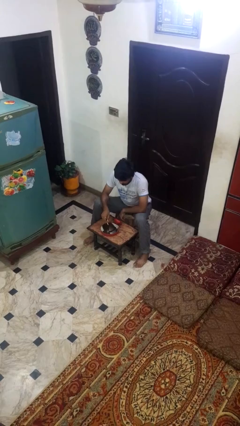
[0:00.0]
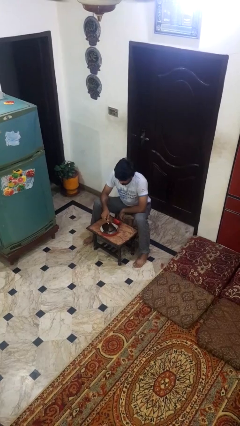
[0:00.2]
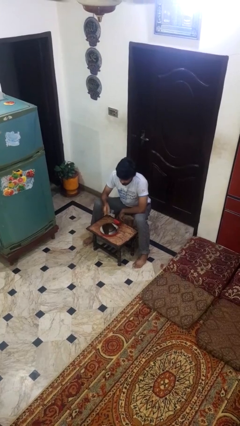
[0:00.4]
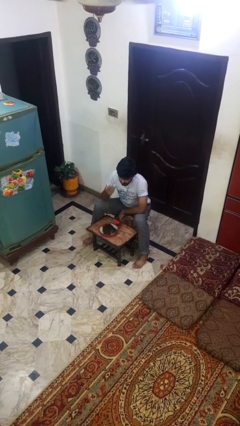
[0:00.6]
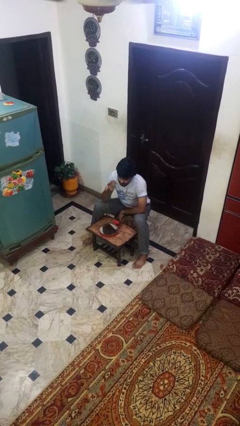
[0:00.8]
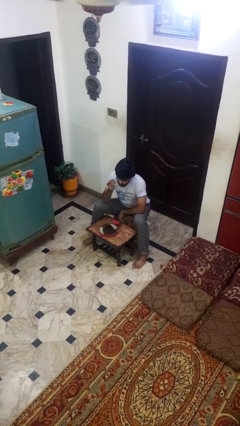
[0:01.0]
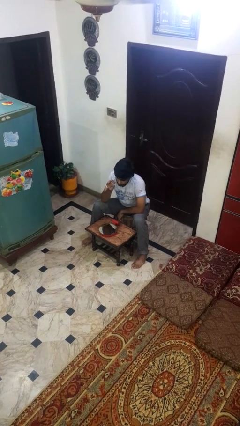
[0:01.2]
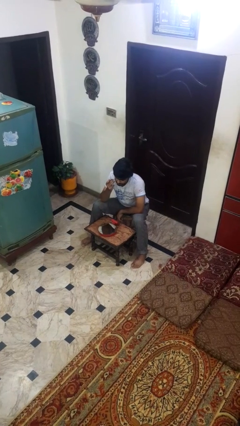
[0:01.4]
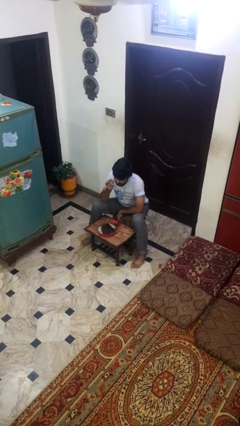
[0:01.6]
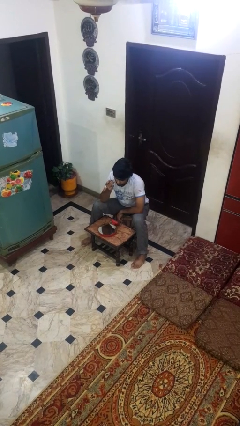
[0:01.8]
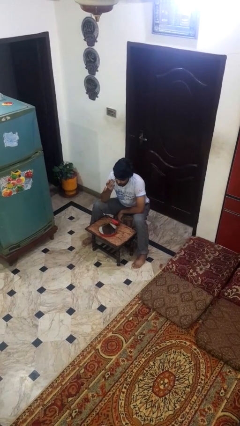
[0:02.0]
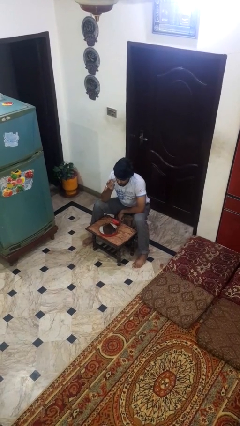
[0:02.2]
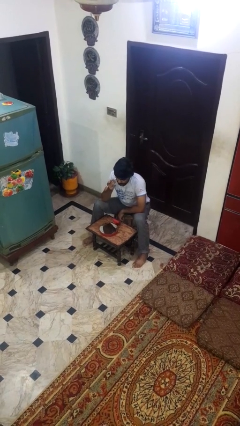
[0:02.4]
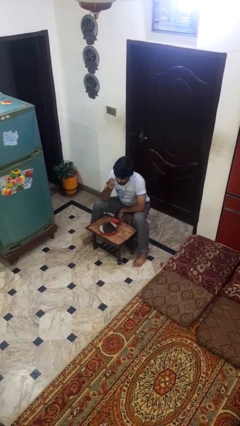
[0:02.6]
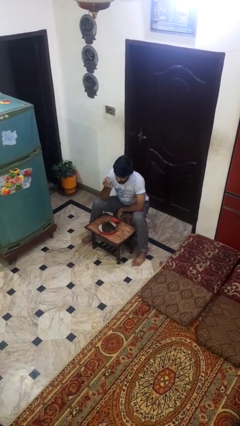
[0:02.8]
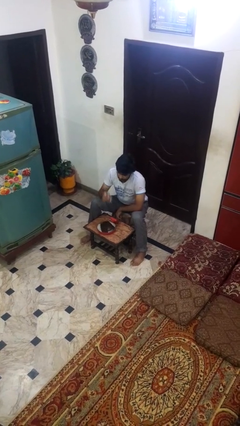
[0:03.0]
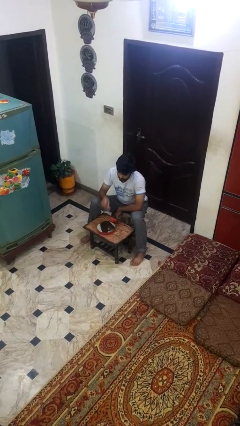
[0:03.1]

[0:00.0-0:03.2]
person applies eye makeup

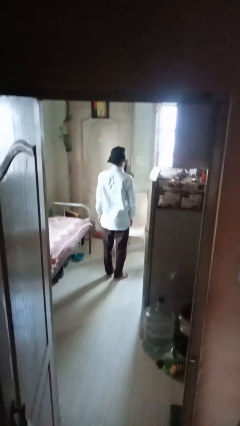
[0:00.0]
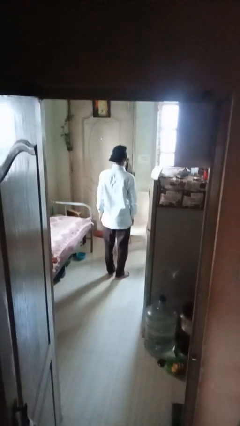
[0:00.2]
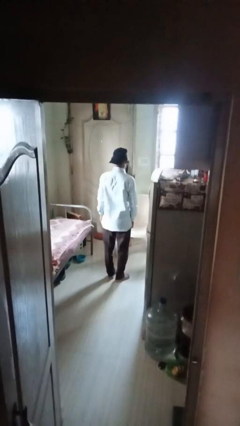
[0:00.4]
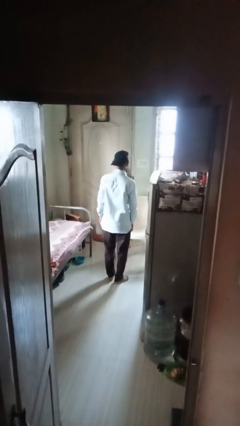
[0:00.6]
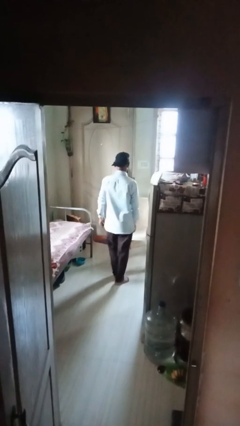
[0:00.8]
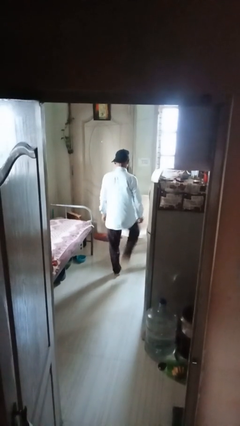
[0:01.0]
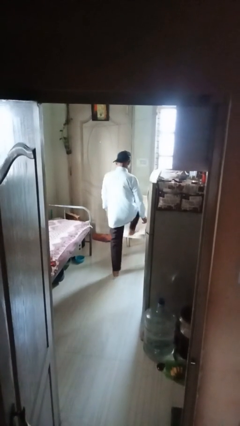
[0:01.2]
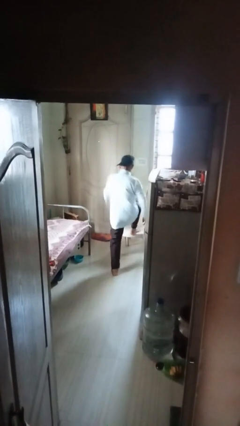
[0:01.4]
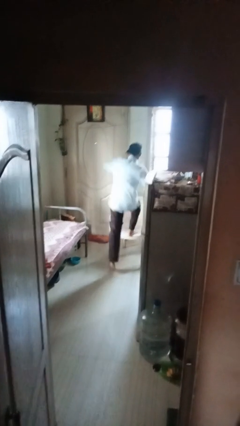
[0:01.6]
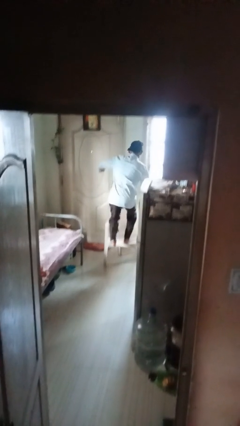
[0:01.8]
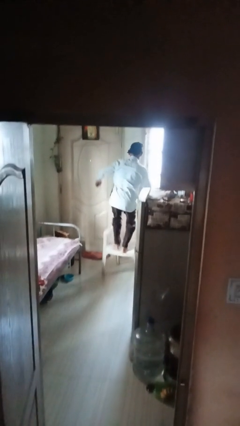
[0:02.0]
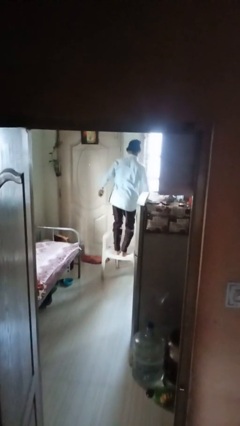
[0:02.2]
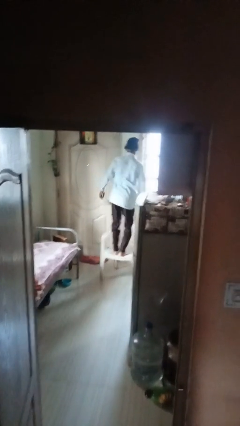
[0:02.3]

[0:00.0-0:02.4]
person climbs on chair

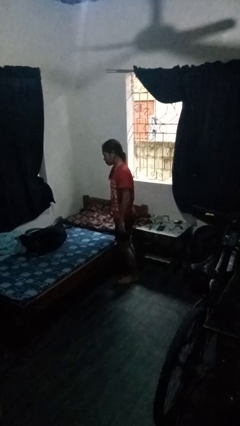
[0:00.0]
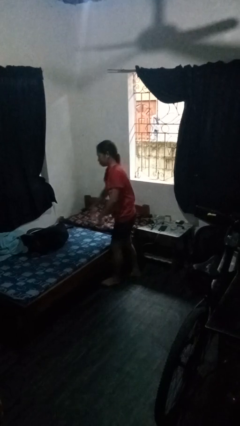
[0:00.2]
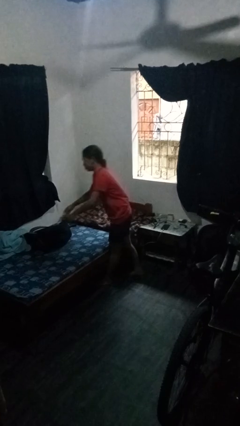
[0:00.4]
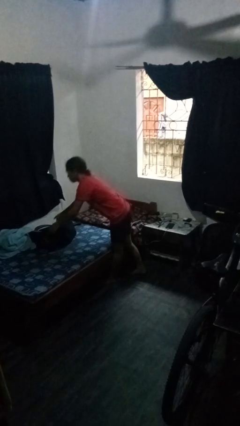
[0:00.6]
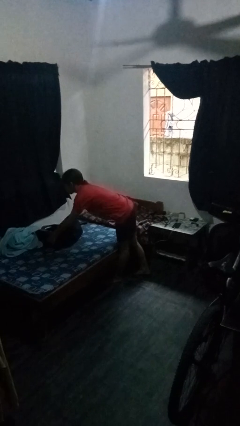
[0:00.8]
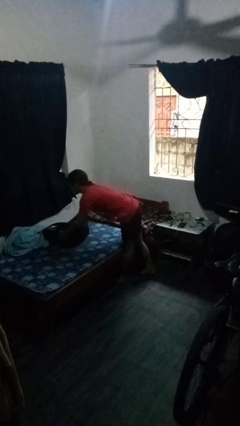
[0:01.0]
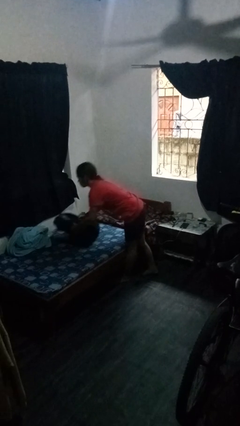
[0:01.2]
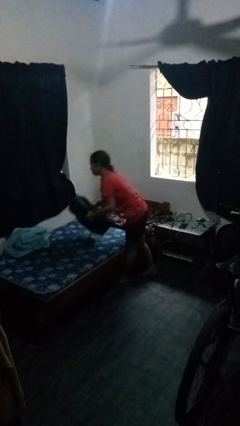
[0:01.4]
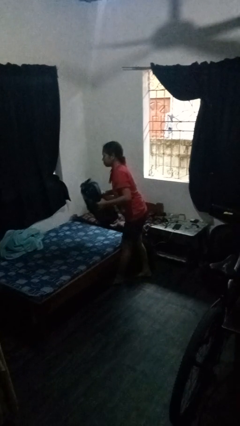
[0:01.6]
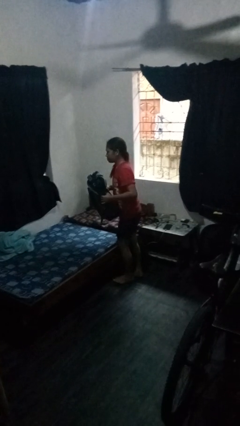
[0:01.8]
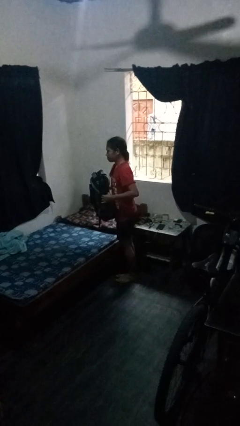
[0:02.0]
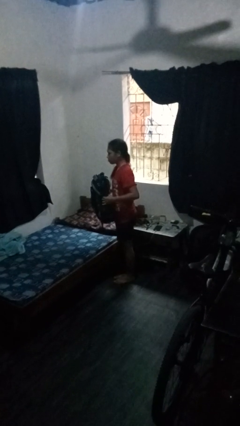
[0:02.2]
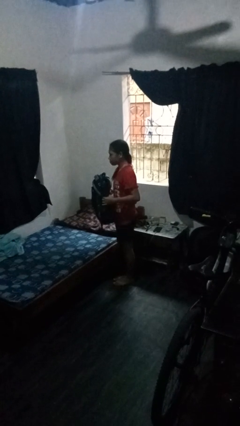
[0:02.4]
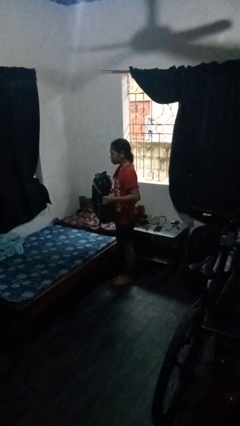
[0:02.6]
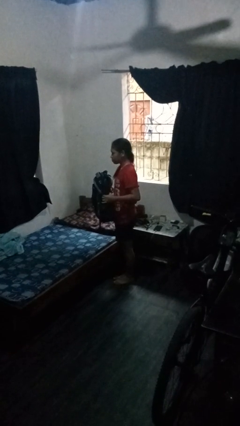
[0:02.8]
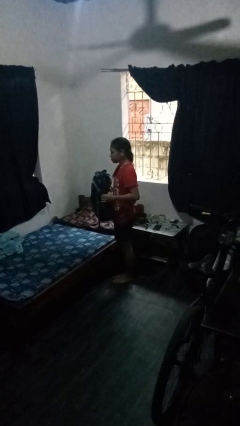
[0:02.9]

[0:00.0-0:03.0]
person picks up object from bed

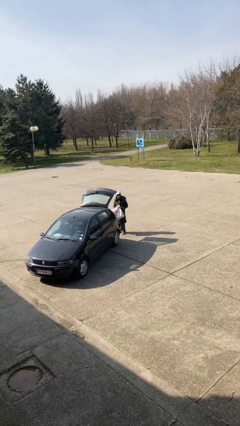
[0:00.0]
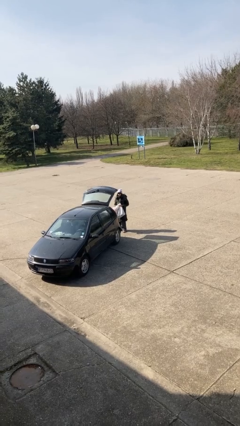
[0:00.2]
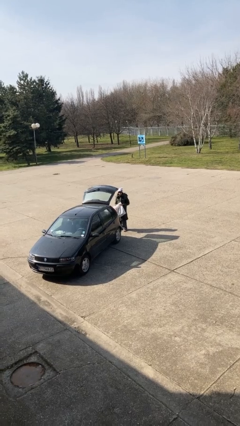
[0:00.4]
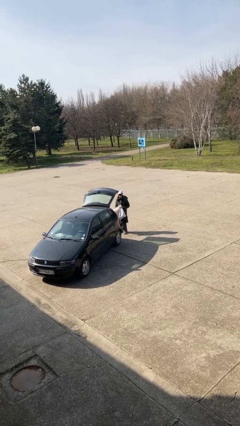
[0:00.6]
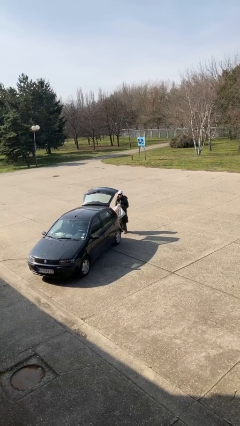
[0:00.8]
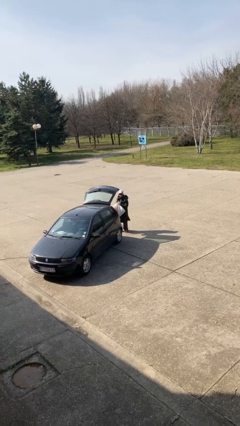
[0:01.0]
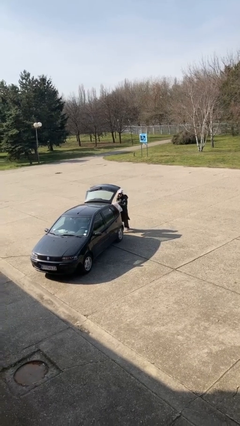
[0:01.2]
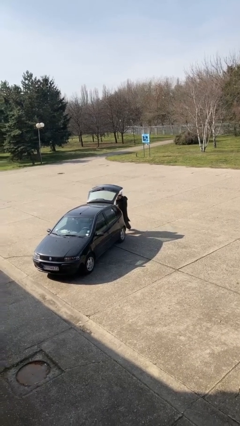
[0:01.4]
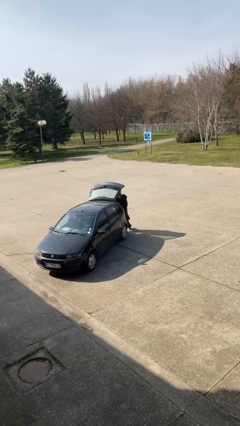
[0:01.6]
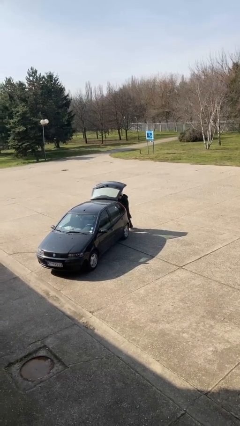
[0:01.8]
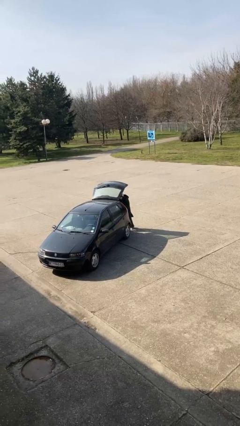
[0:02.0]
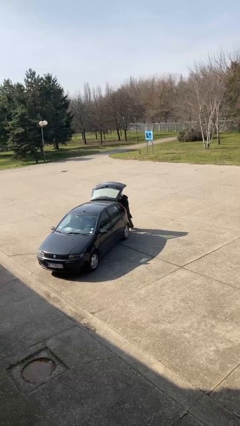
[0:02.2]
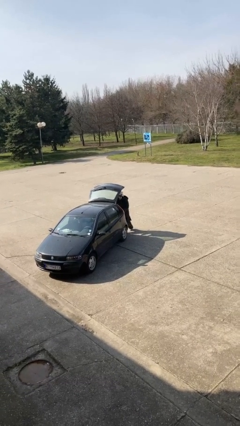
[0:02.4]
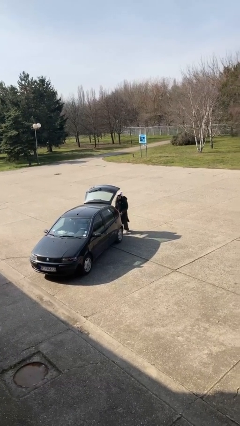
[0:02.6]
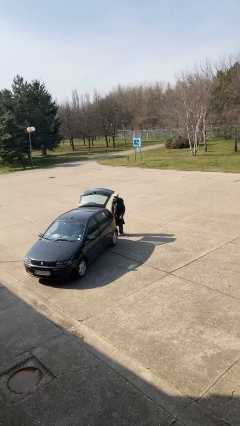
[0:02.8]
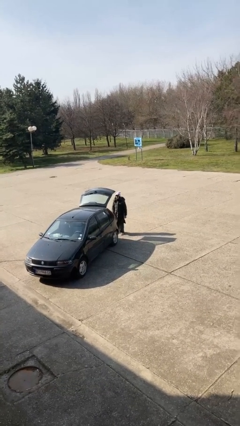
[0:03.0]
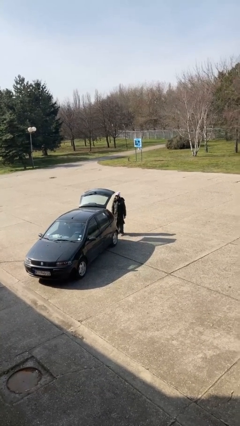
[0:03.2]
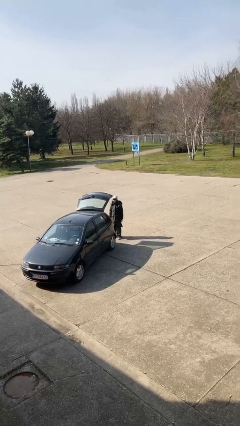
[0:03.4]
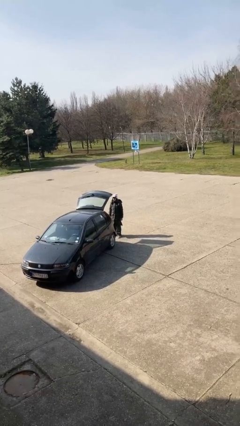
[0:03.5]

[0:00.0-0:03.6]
person loads car

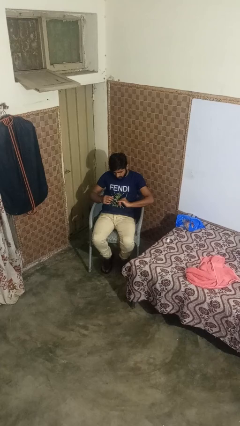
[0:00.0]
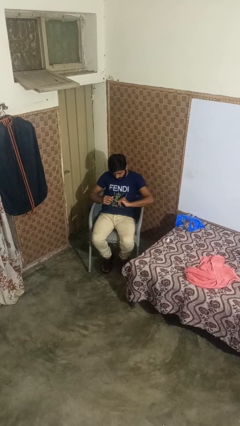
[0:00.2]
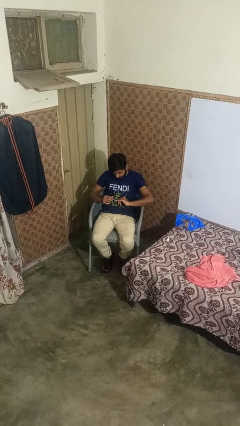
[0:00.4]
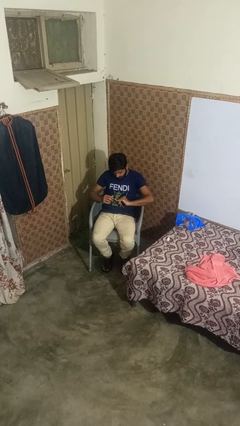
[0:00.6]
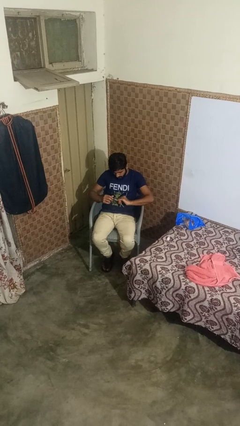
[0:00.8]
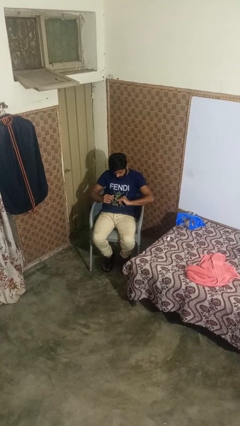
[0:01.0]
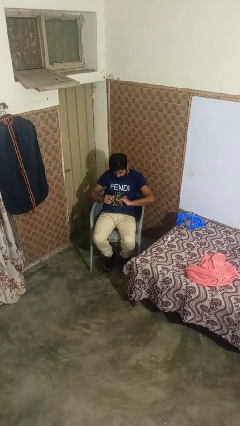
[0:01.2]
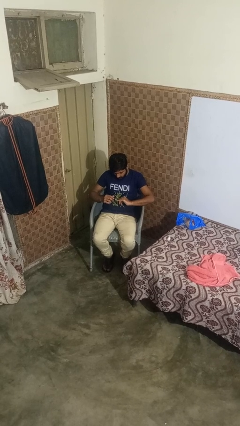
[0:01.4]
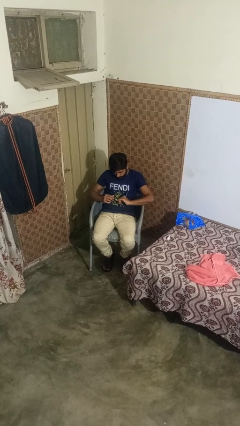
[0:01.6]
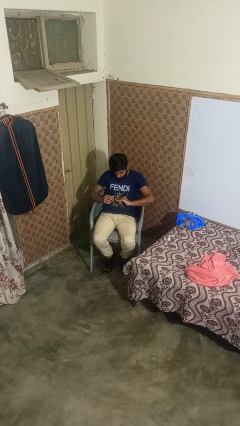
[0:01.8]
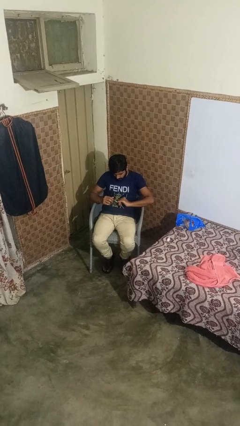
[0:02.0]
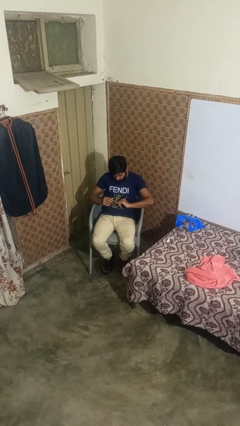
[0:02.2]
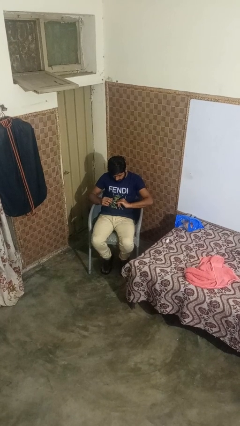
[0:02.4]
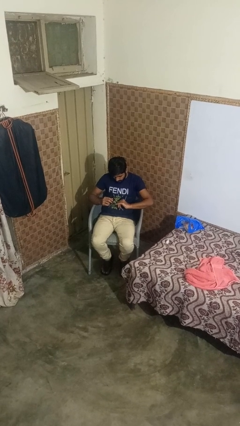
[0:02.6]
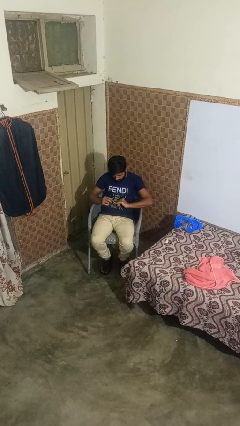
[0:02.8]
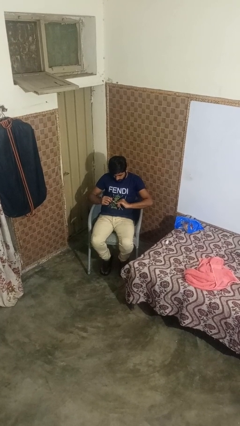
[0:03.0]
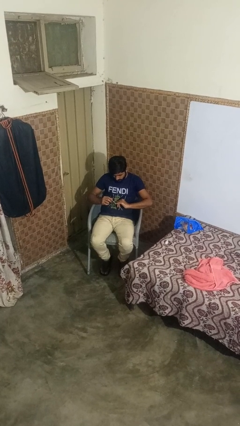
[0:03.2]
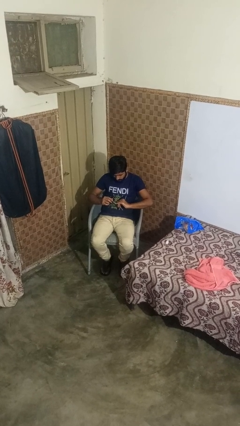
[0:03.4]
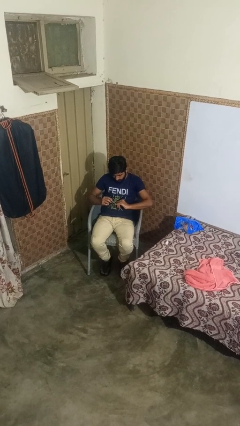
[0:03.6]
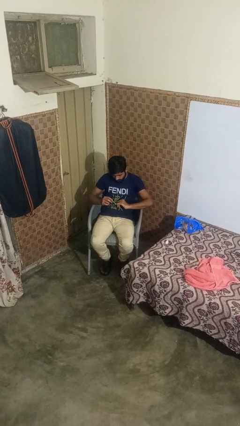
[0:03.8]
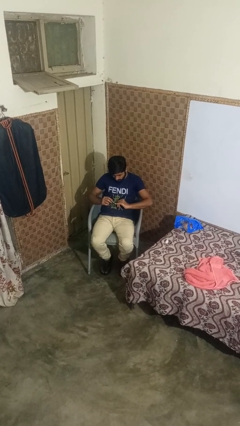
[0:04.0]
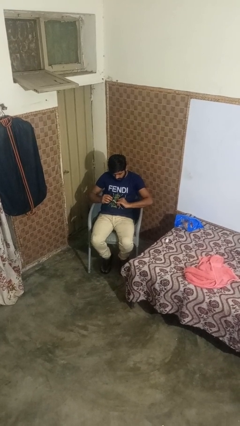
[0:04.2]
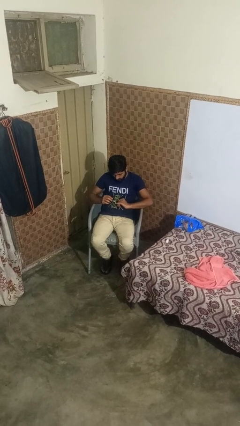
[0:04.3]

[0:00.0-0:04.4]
person paints fingernails

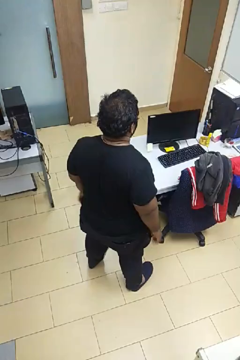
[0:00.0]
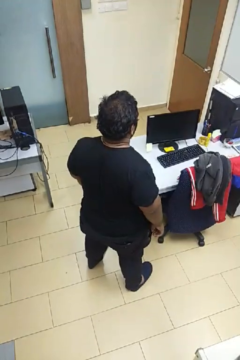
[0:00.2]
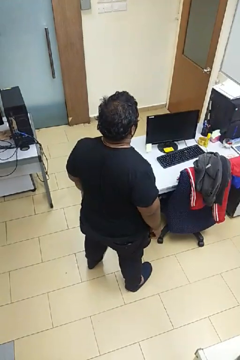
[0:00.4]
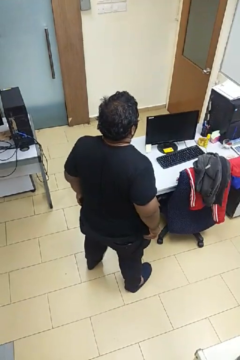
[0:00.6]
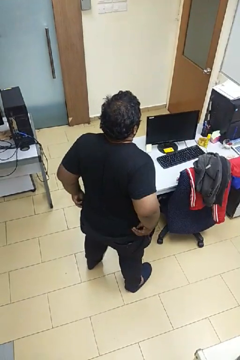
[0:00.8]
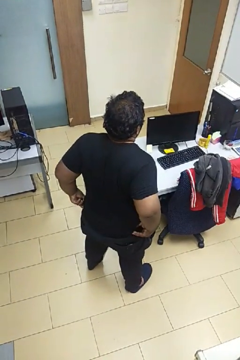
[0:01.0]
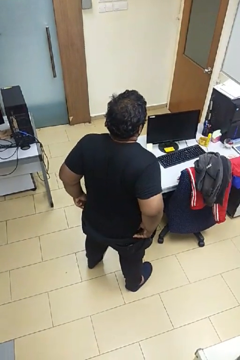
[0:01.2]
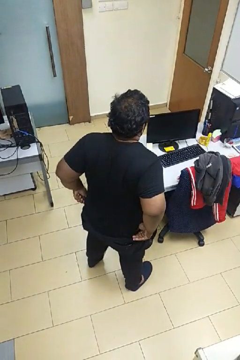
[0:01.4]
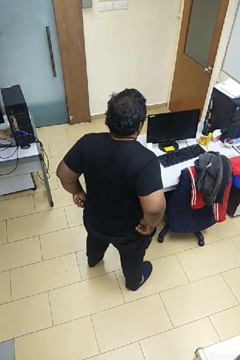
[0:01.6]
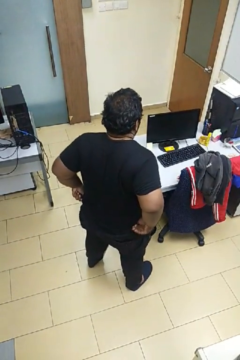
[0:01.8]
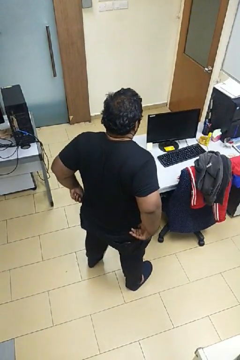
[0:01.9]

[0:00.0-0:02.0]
person hikes up pants
